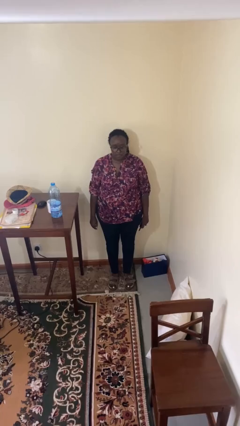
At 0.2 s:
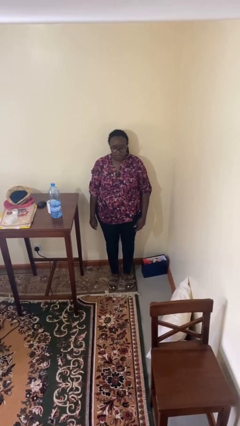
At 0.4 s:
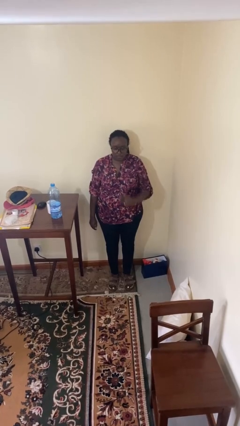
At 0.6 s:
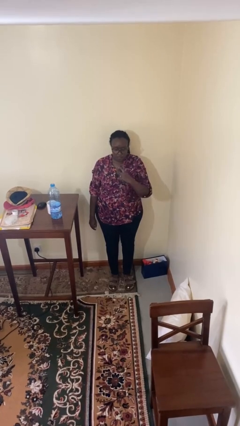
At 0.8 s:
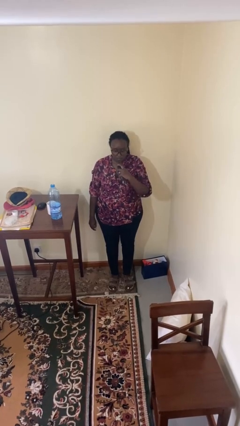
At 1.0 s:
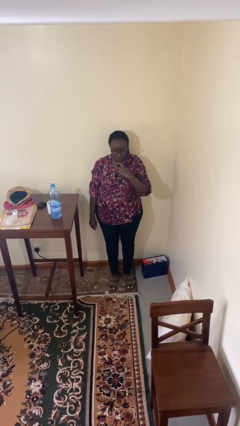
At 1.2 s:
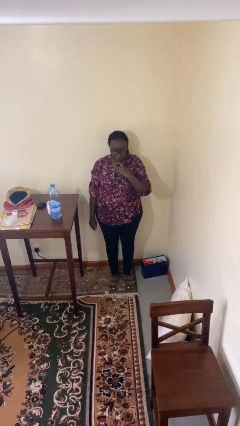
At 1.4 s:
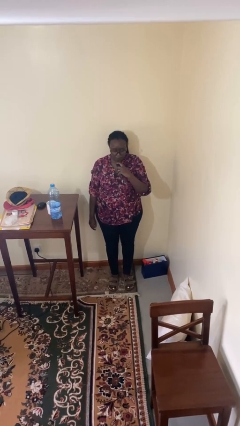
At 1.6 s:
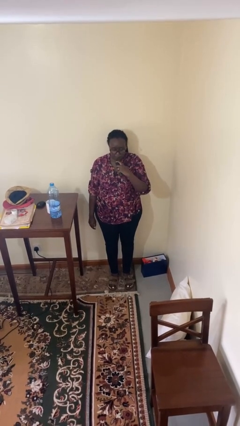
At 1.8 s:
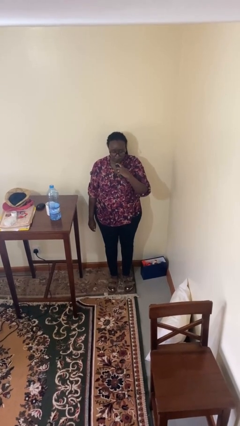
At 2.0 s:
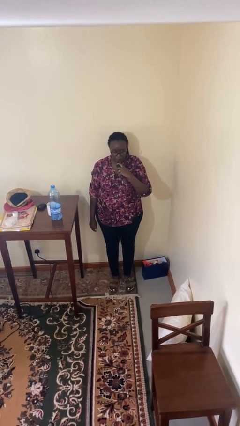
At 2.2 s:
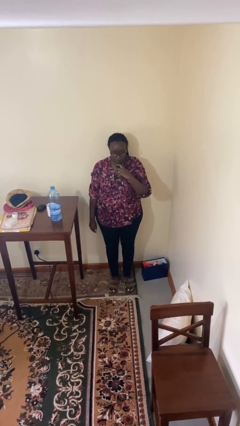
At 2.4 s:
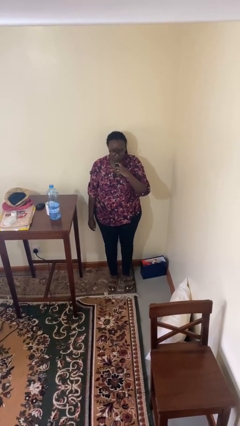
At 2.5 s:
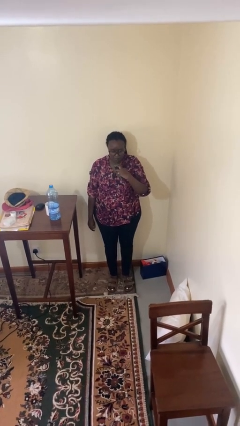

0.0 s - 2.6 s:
person vapes

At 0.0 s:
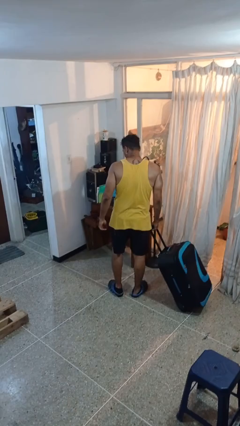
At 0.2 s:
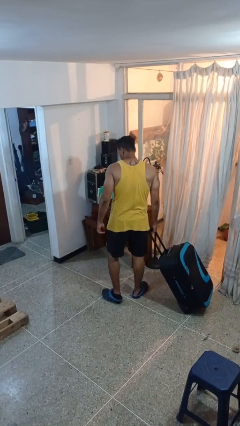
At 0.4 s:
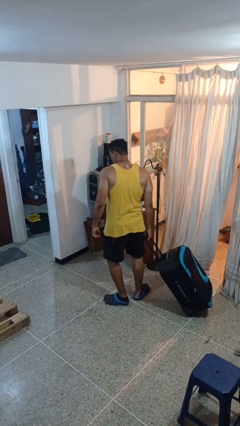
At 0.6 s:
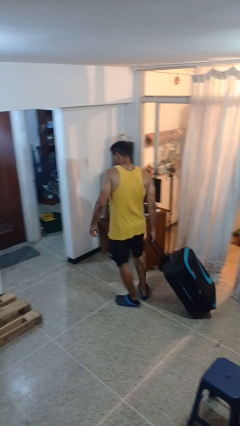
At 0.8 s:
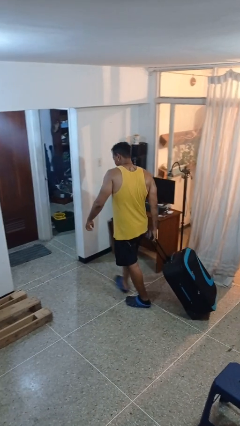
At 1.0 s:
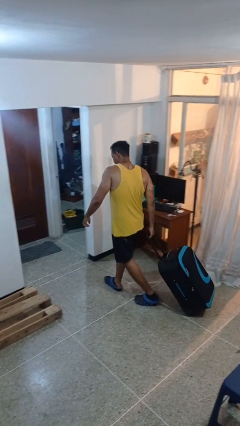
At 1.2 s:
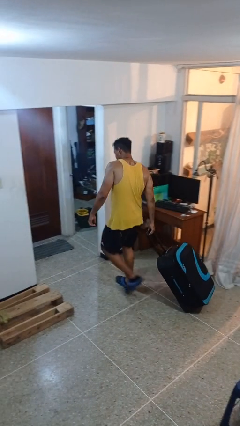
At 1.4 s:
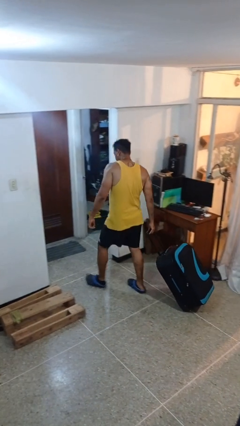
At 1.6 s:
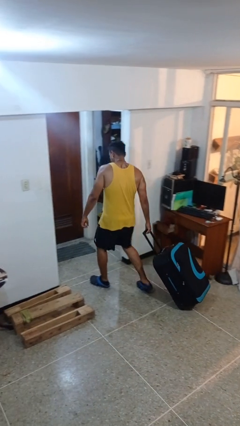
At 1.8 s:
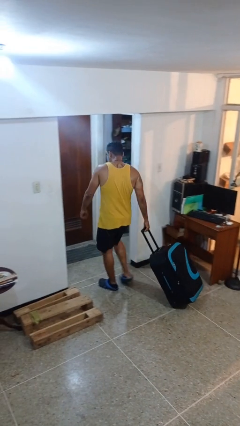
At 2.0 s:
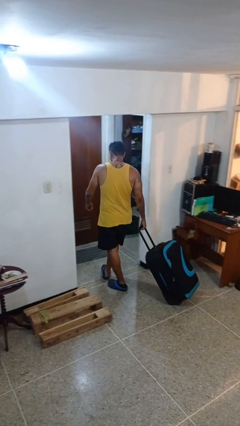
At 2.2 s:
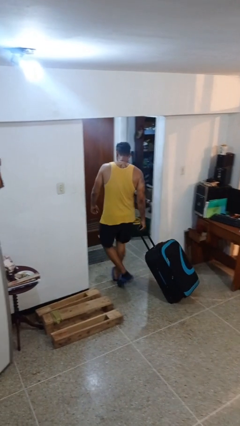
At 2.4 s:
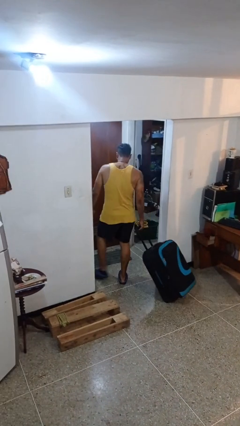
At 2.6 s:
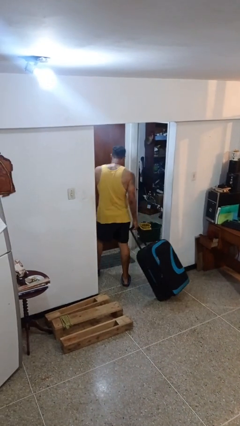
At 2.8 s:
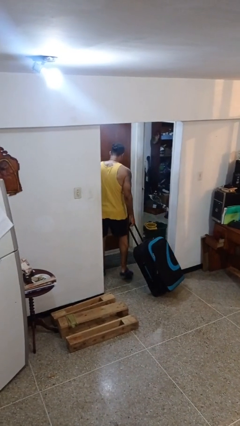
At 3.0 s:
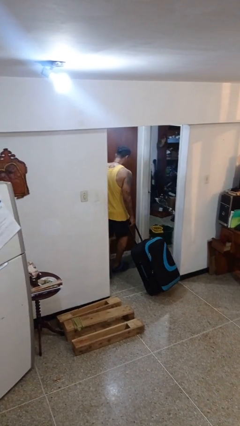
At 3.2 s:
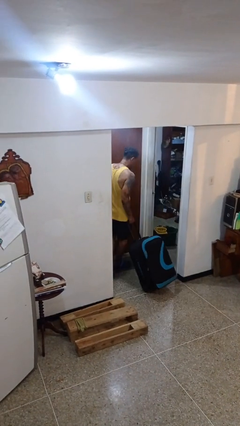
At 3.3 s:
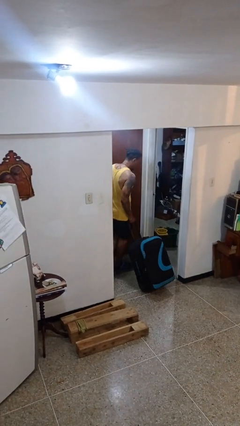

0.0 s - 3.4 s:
person pulls wheeled cart

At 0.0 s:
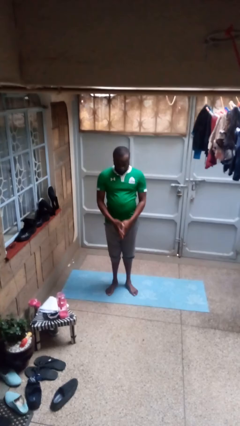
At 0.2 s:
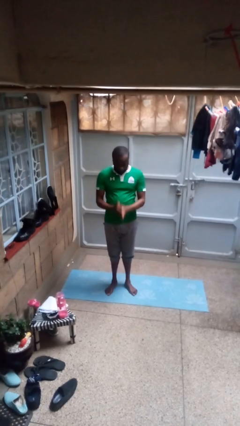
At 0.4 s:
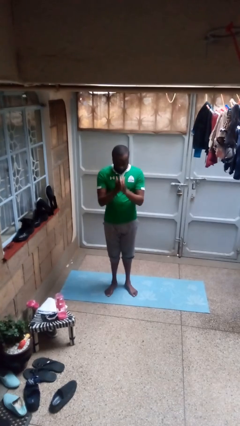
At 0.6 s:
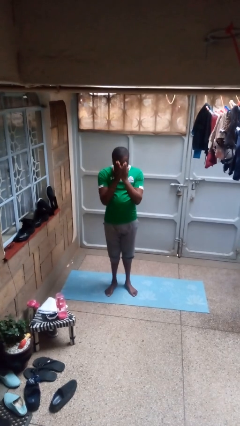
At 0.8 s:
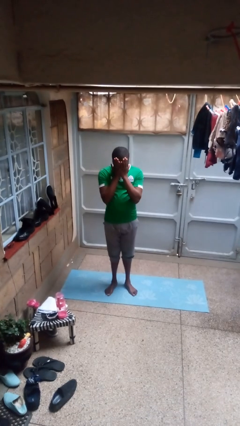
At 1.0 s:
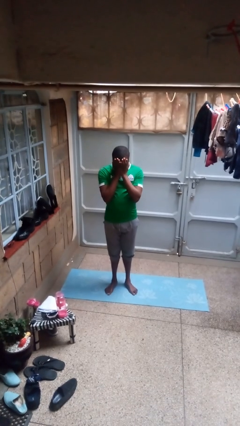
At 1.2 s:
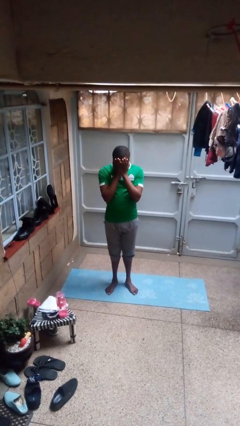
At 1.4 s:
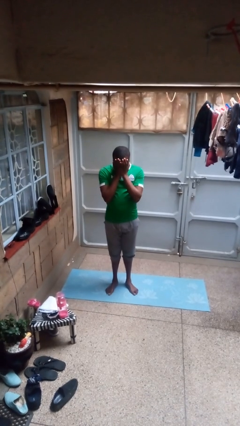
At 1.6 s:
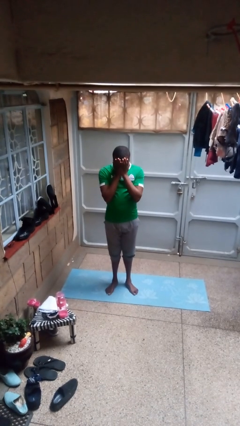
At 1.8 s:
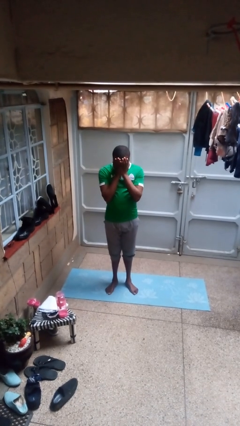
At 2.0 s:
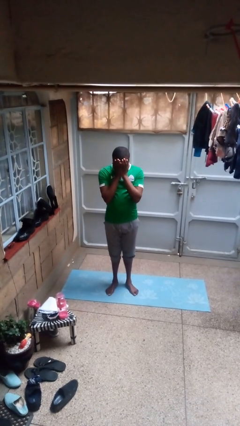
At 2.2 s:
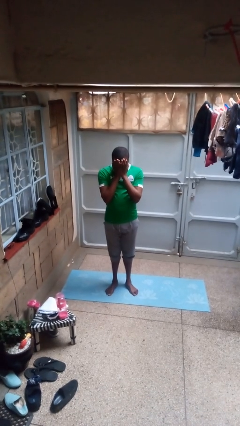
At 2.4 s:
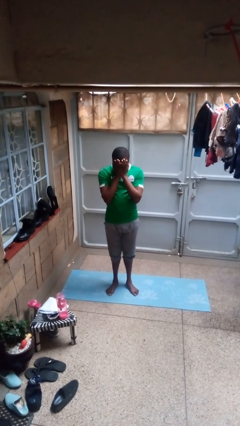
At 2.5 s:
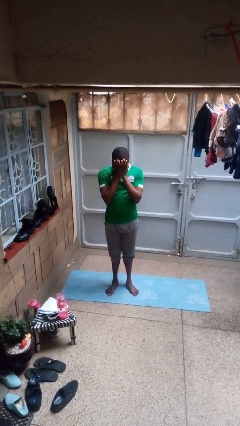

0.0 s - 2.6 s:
person covers face with hands

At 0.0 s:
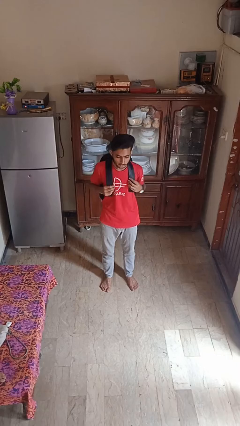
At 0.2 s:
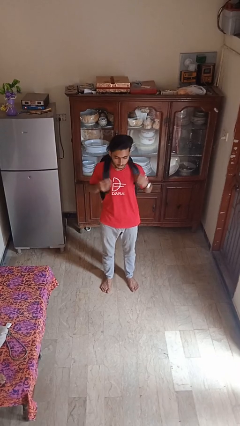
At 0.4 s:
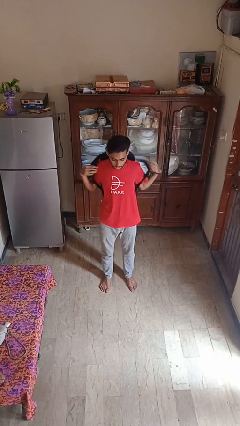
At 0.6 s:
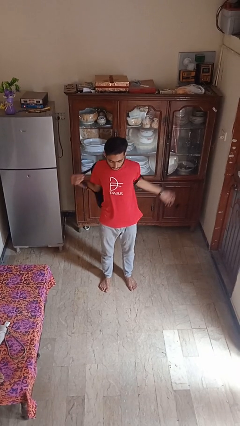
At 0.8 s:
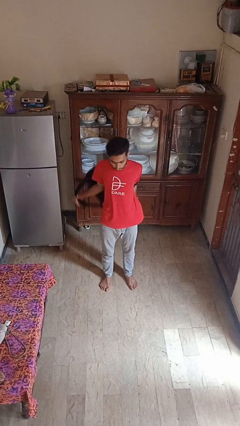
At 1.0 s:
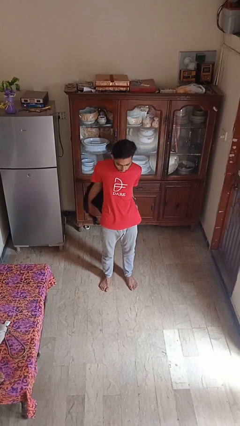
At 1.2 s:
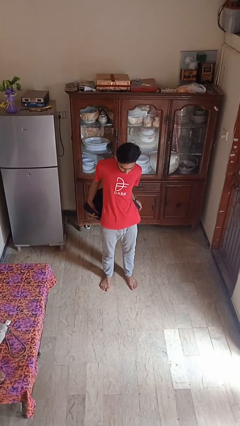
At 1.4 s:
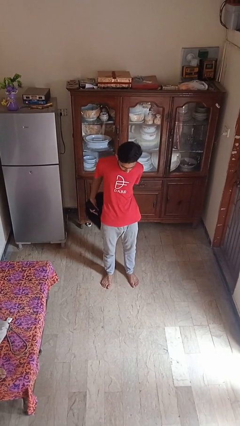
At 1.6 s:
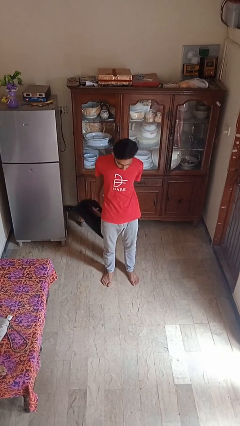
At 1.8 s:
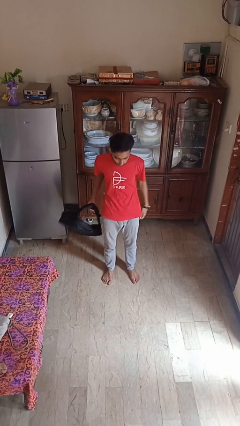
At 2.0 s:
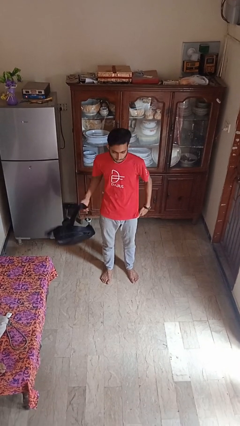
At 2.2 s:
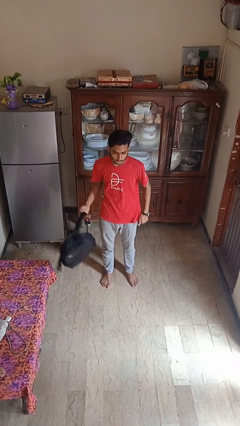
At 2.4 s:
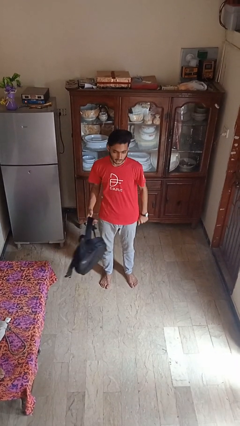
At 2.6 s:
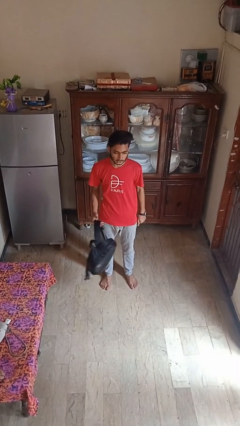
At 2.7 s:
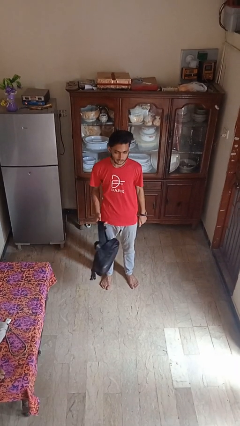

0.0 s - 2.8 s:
person takes off backpack

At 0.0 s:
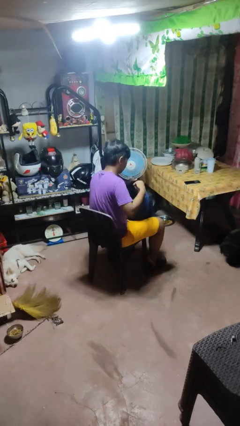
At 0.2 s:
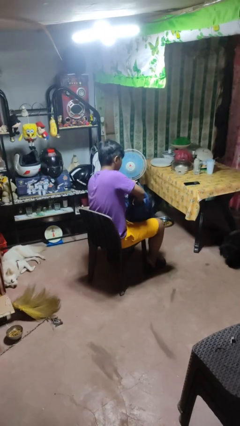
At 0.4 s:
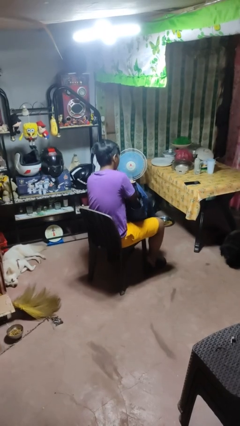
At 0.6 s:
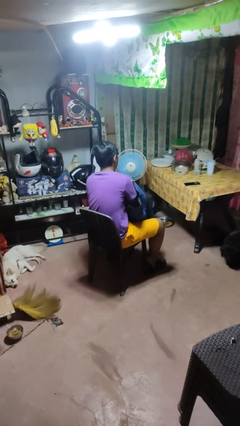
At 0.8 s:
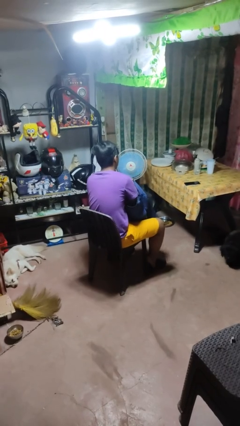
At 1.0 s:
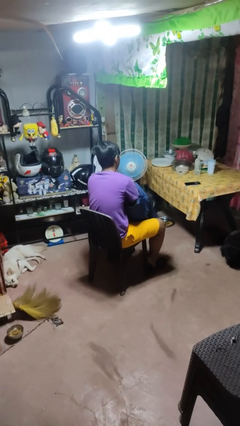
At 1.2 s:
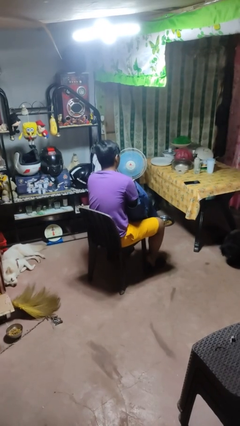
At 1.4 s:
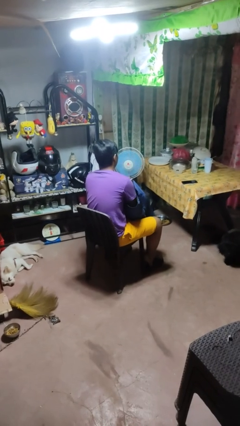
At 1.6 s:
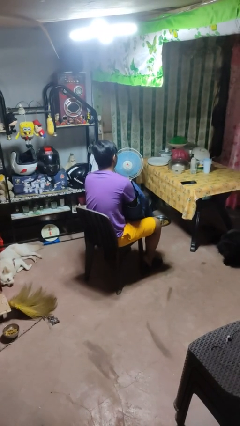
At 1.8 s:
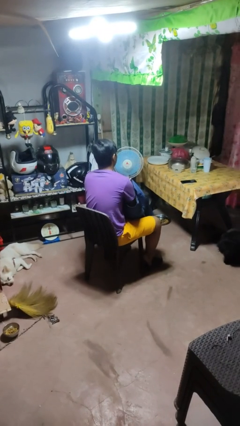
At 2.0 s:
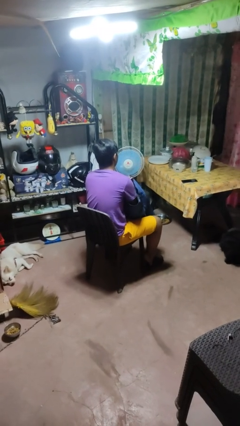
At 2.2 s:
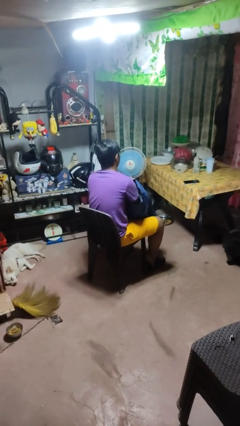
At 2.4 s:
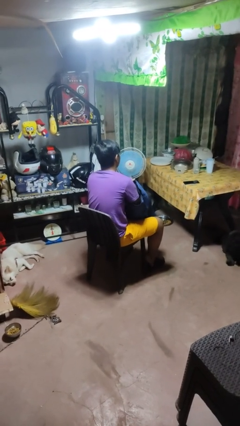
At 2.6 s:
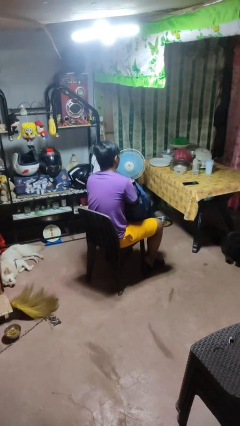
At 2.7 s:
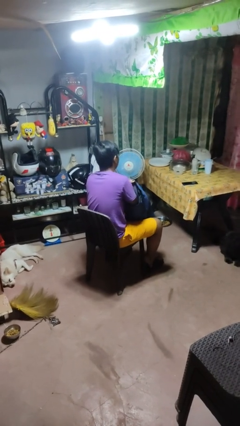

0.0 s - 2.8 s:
person searches in backpack

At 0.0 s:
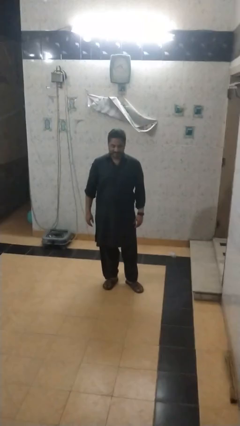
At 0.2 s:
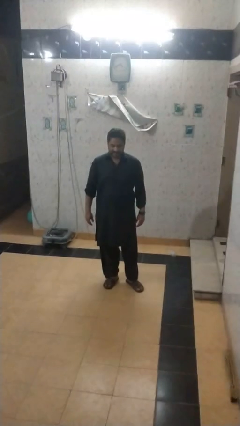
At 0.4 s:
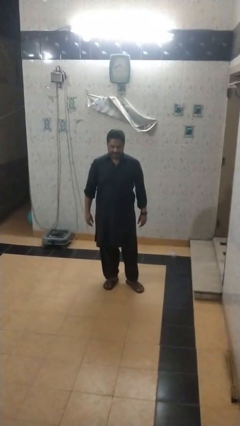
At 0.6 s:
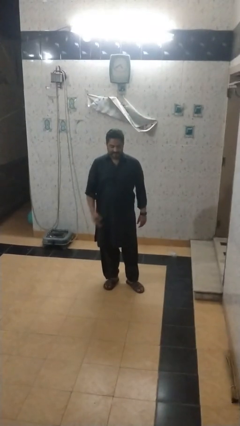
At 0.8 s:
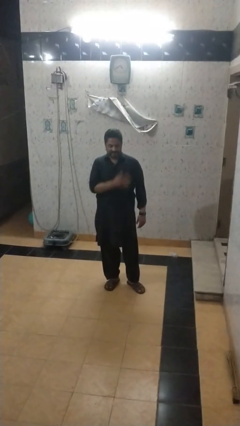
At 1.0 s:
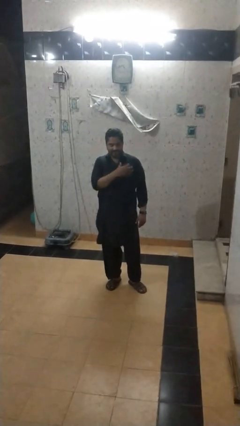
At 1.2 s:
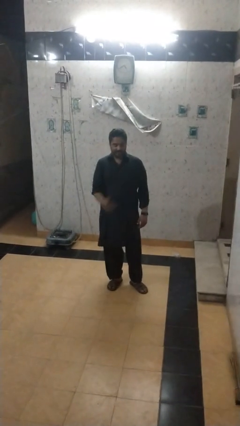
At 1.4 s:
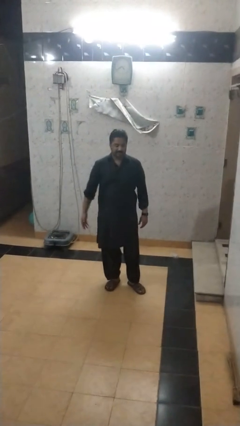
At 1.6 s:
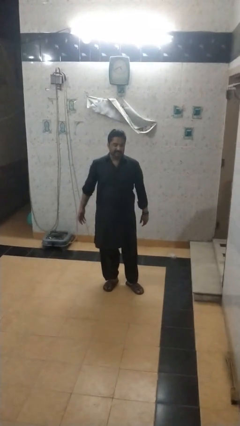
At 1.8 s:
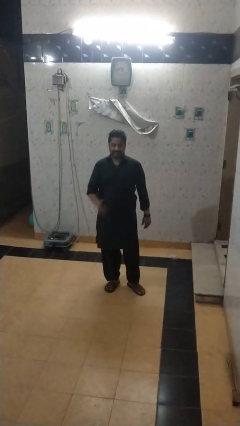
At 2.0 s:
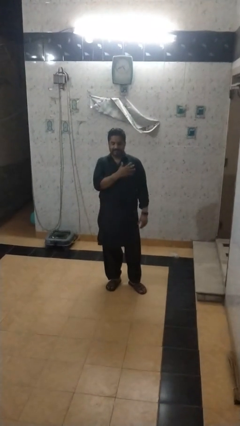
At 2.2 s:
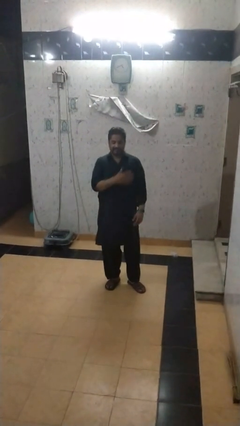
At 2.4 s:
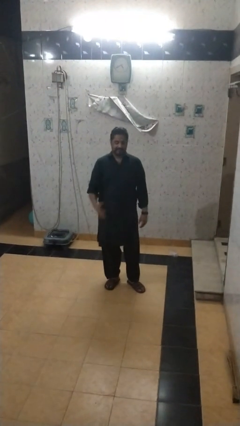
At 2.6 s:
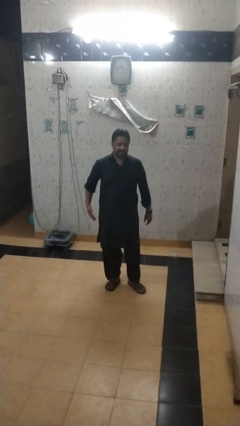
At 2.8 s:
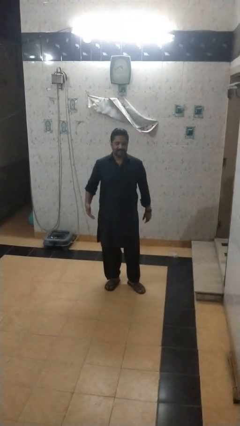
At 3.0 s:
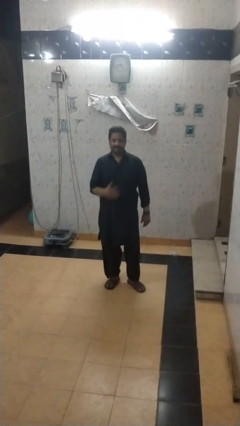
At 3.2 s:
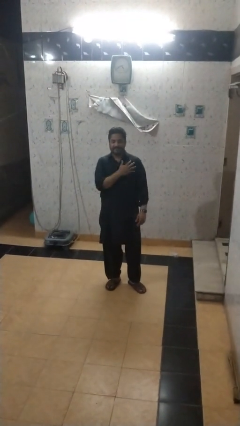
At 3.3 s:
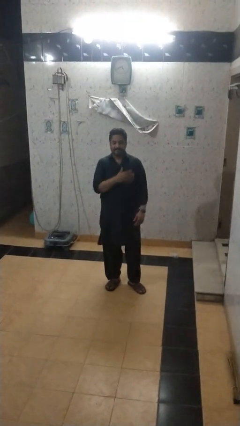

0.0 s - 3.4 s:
person drums on chest
